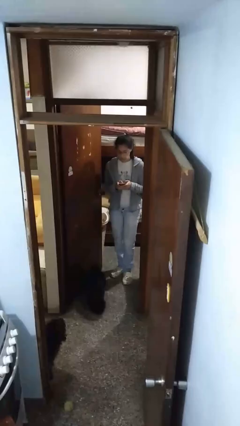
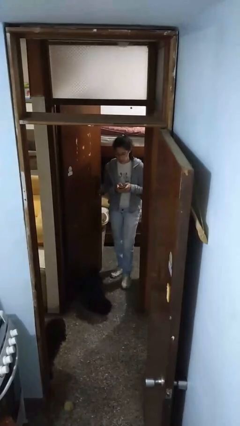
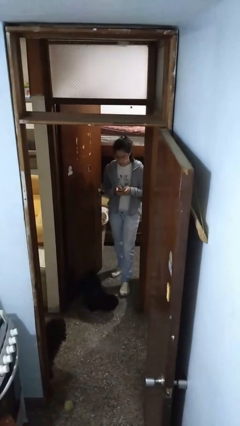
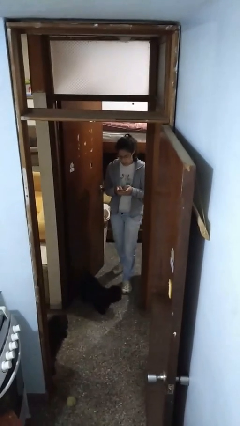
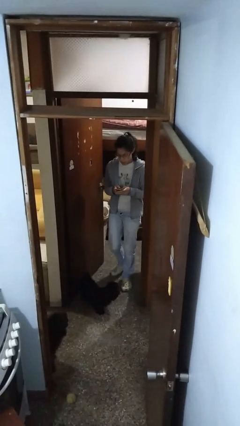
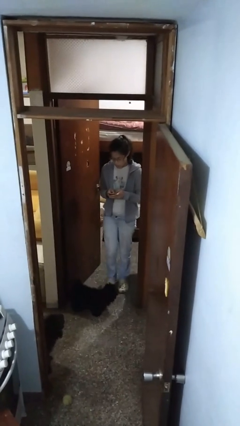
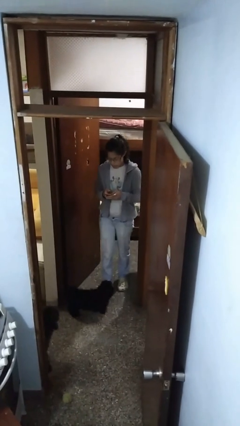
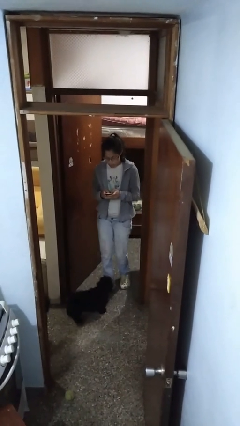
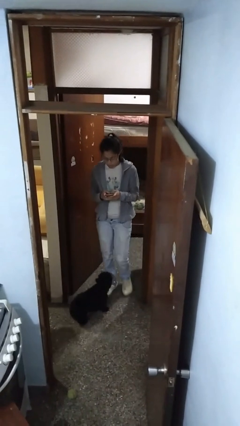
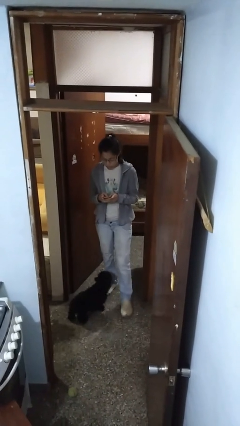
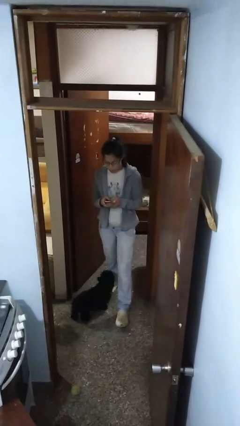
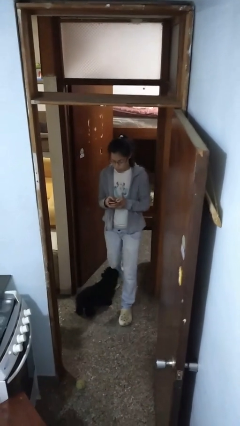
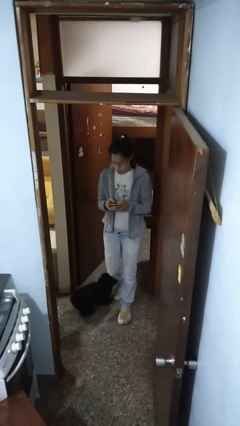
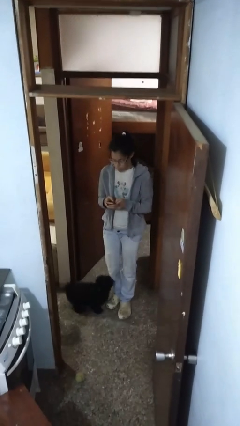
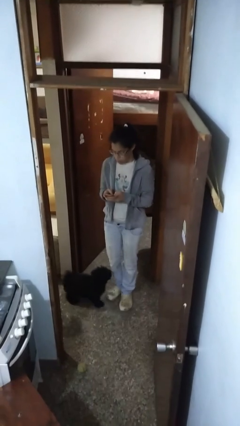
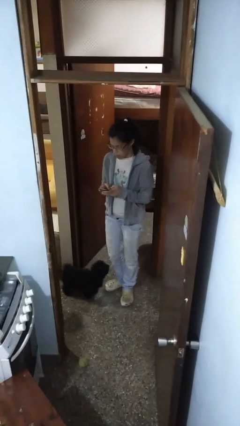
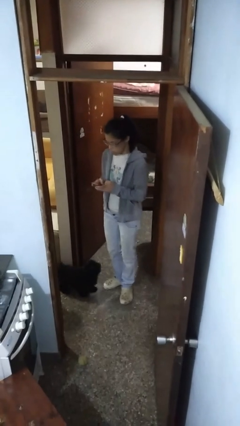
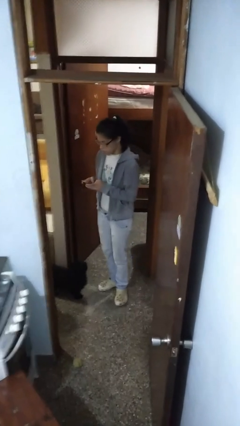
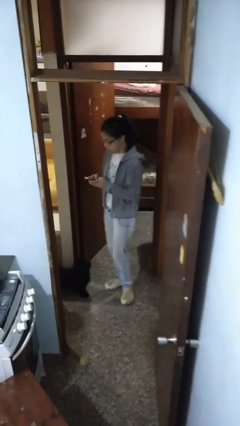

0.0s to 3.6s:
person enters scene through structure

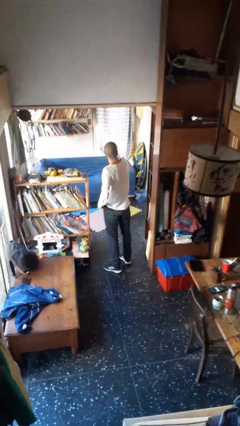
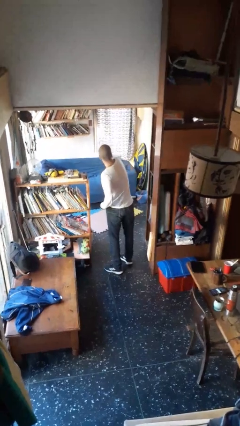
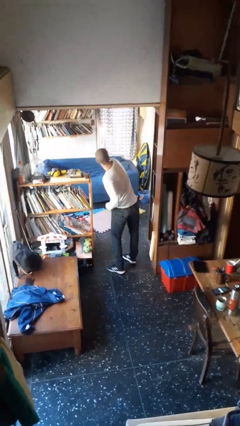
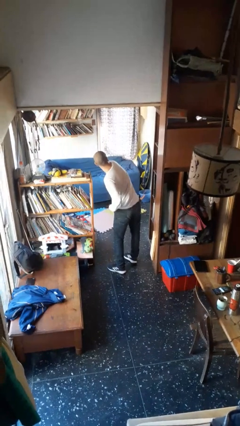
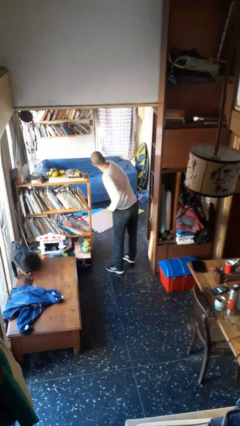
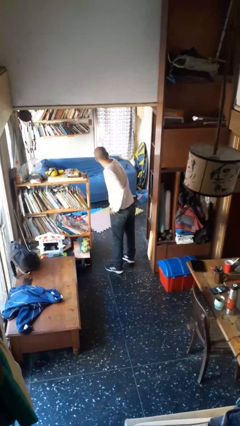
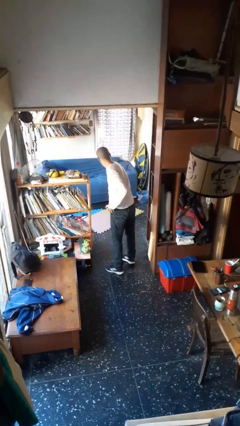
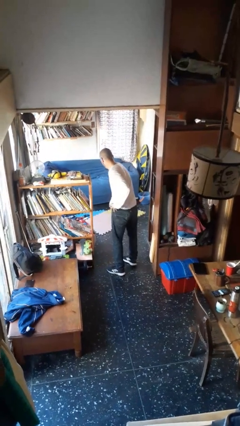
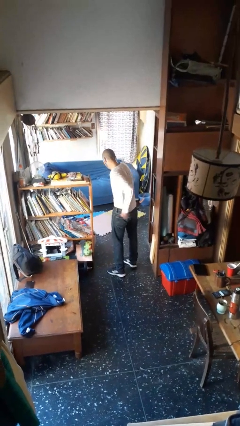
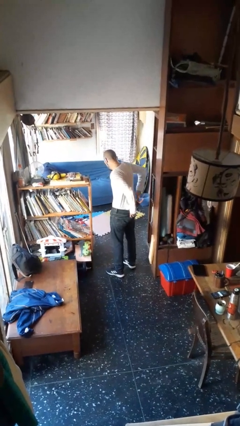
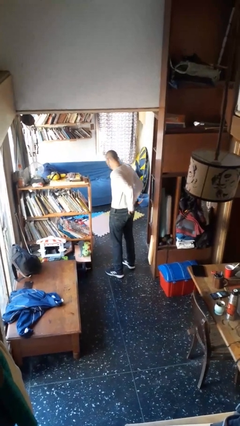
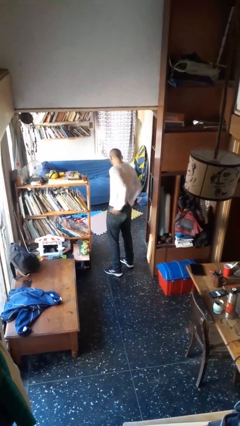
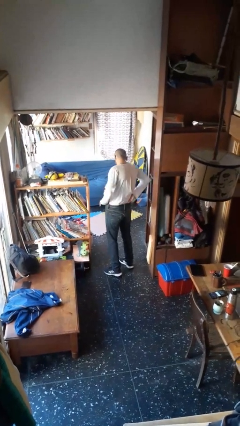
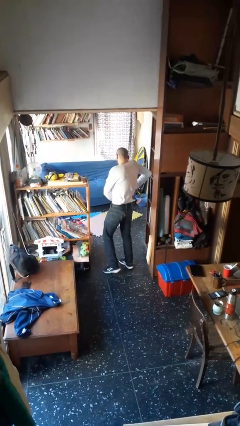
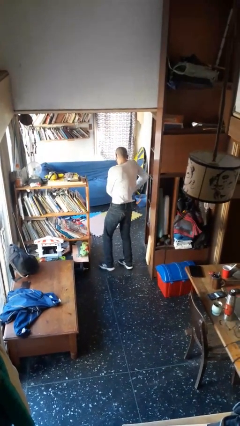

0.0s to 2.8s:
person tucks in shirt

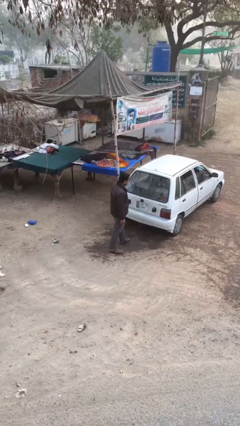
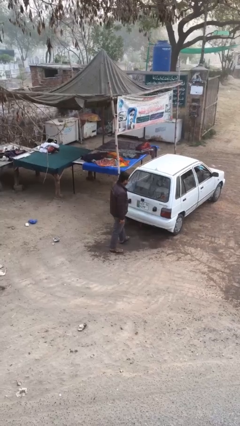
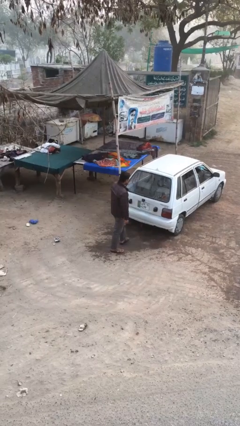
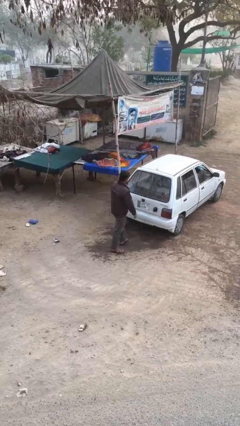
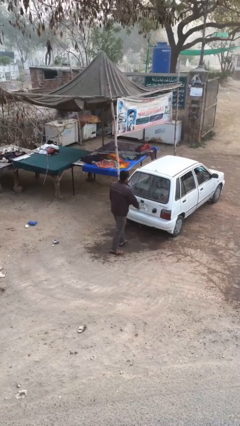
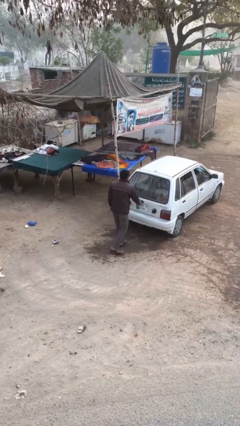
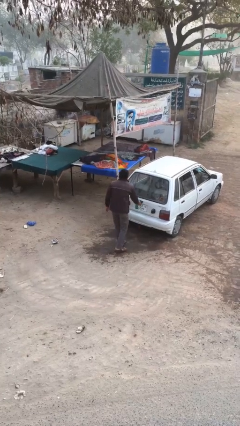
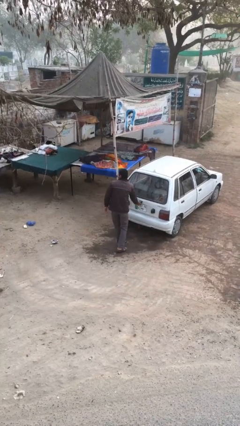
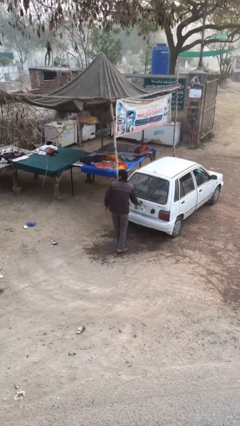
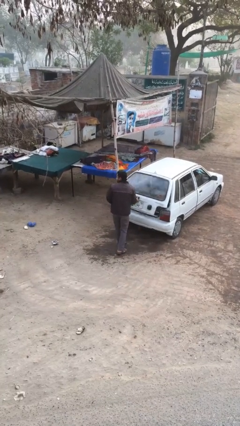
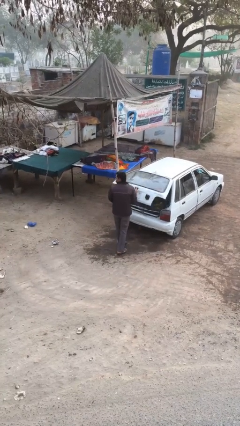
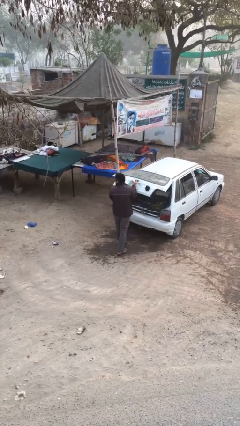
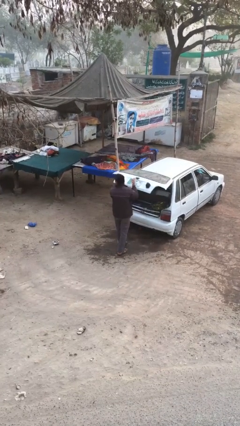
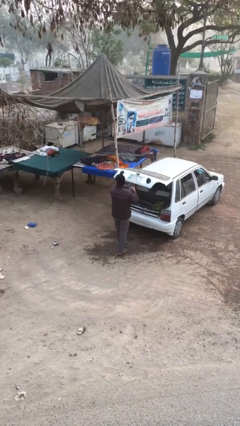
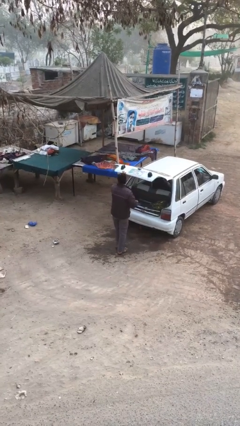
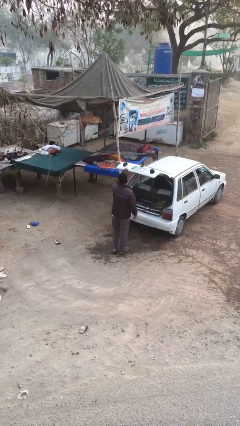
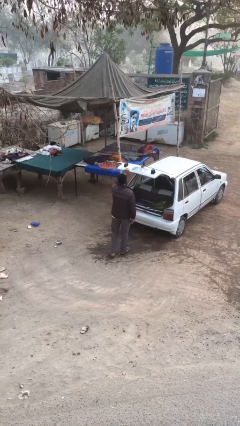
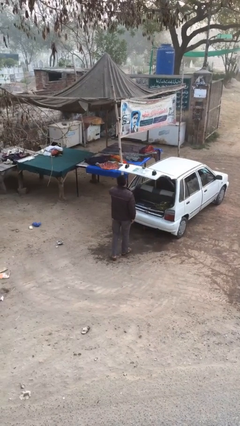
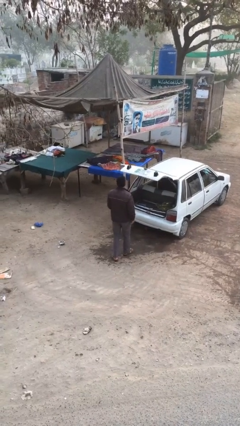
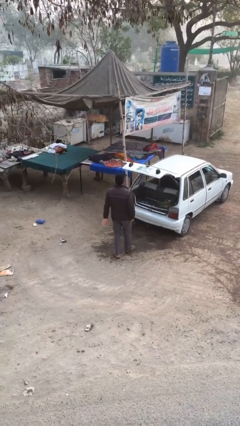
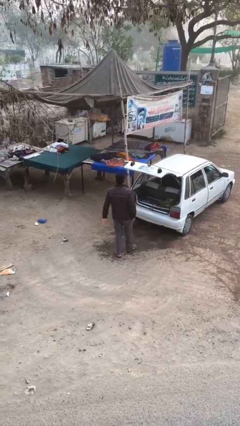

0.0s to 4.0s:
person opens car trunk

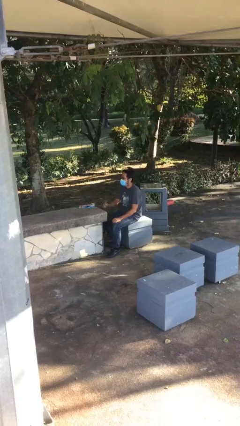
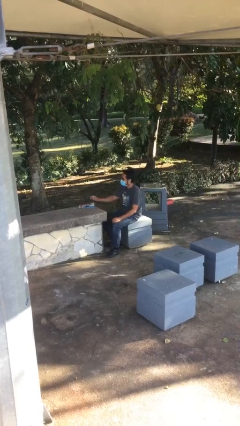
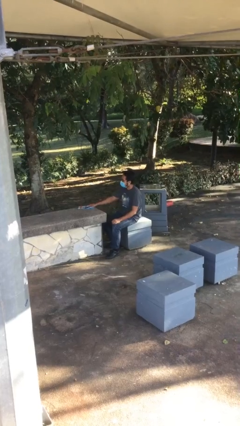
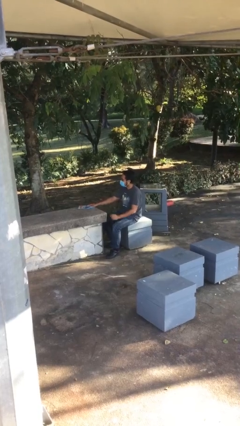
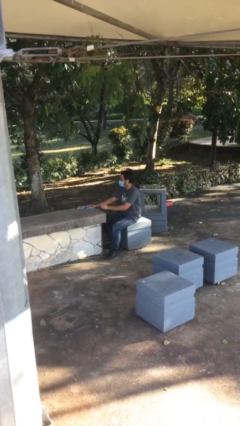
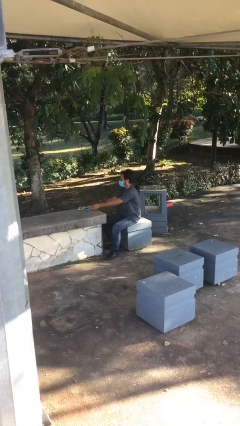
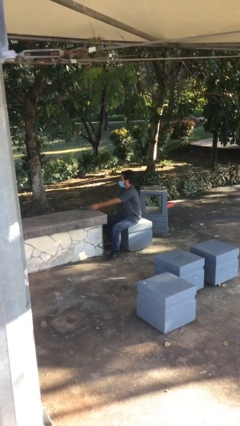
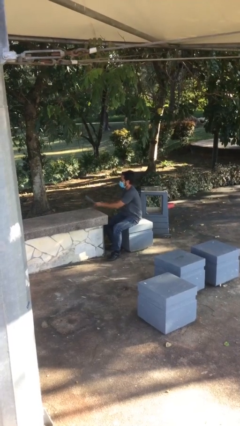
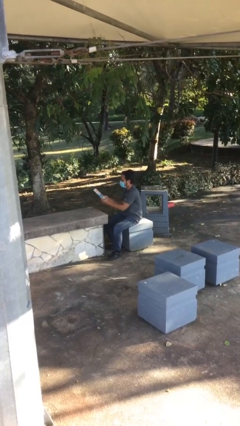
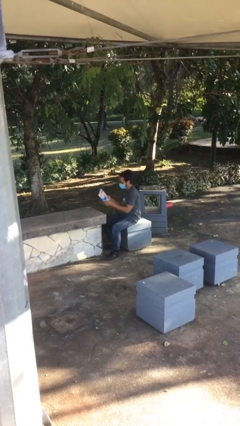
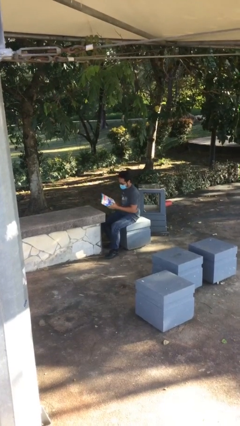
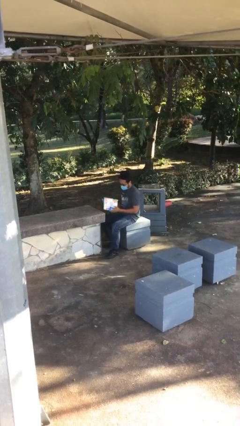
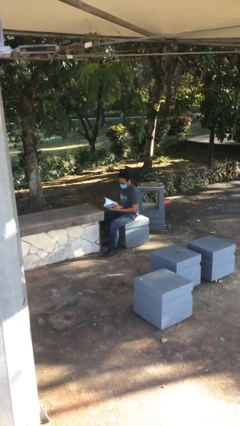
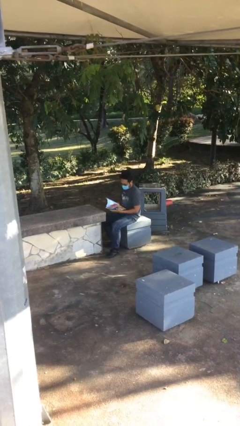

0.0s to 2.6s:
person picks up object from table

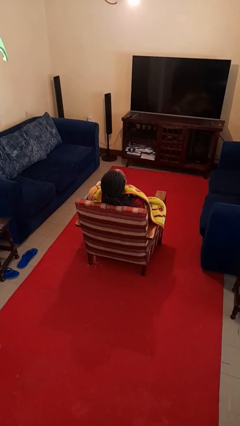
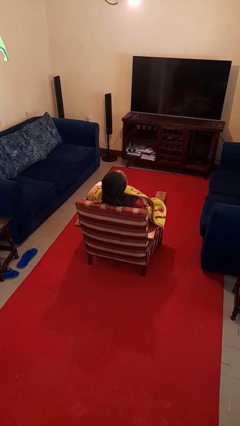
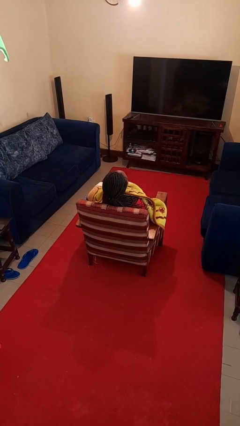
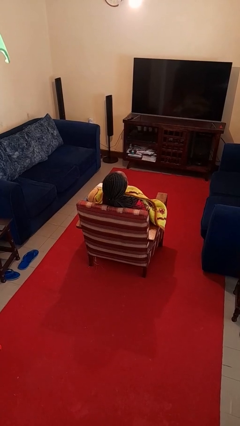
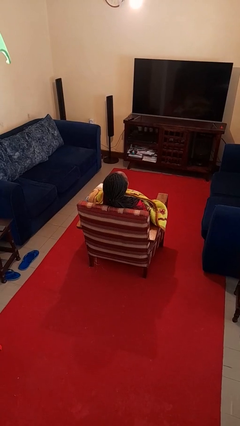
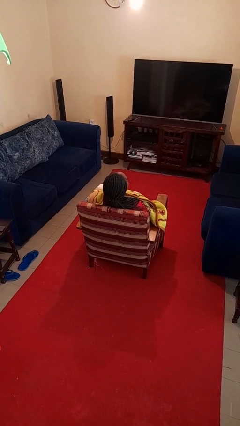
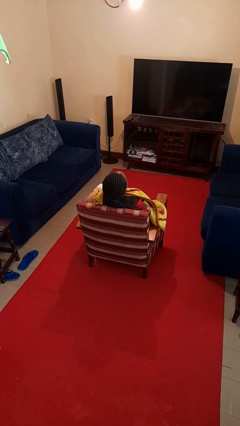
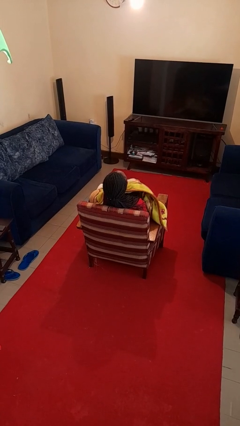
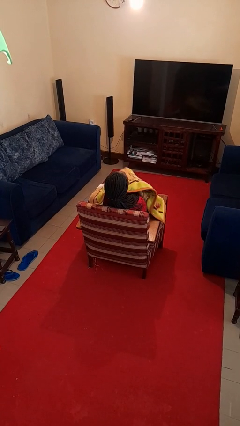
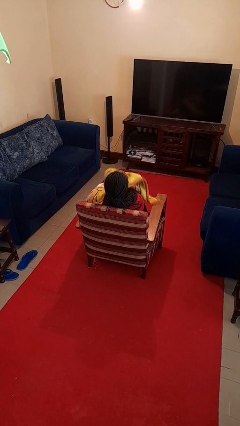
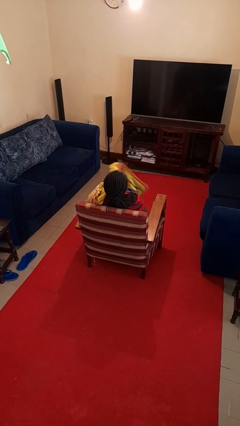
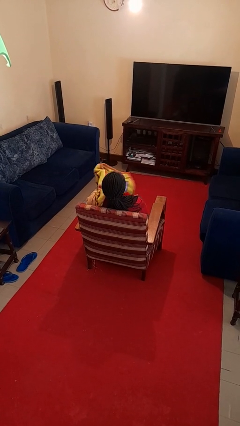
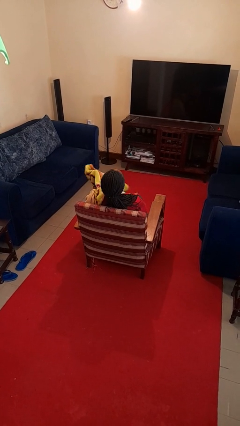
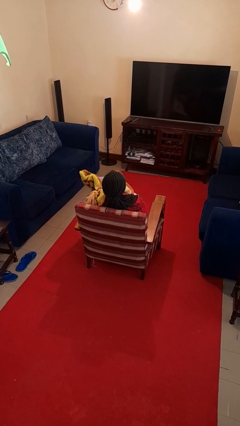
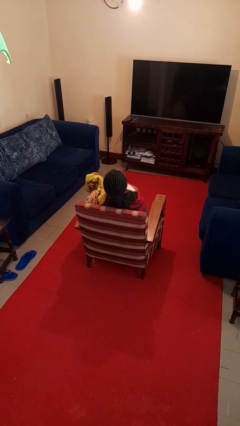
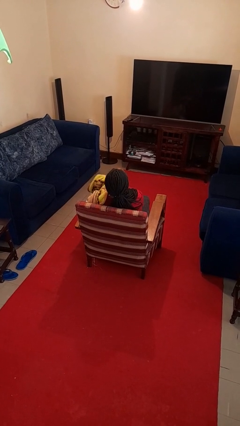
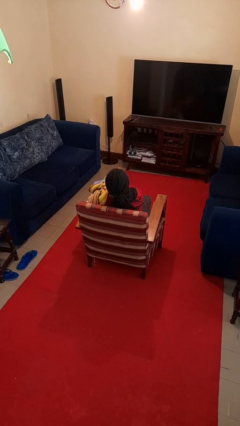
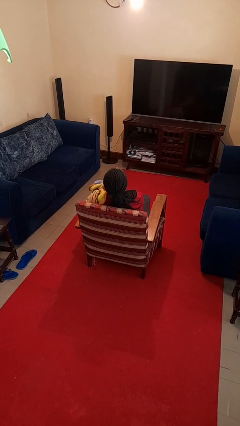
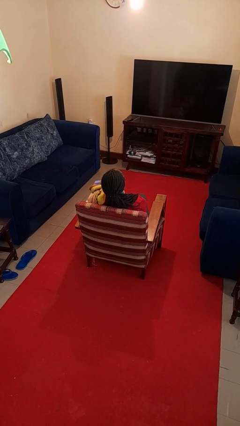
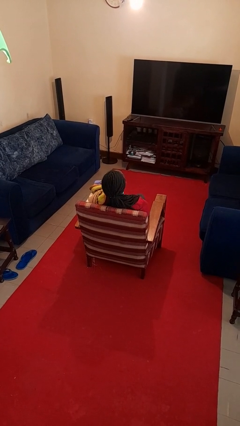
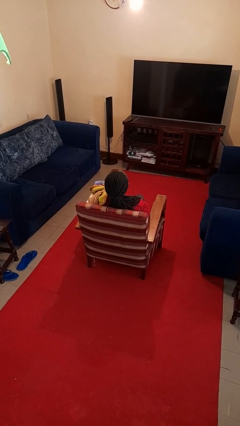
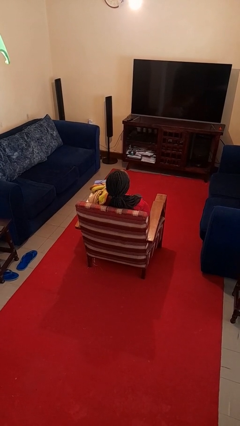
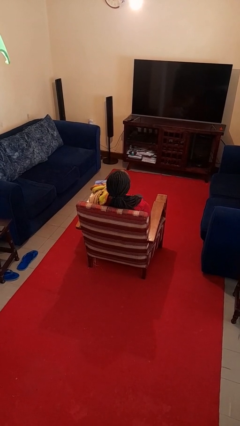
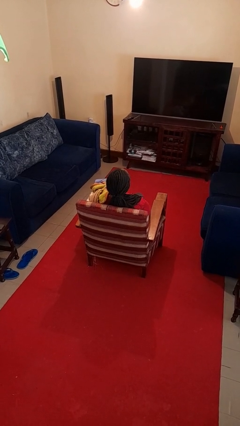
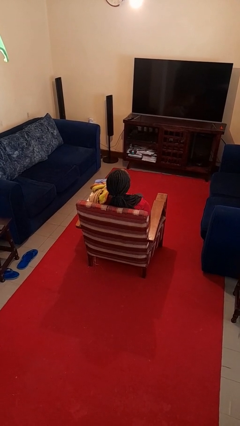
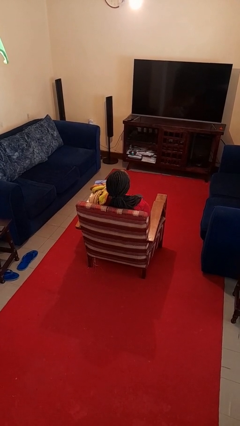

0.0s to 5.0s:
person uncovers with blanket
